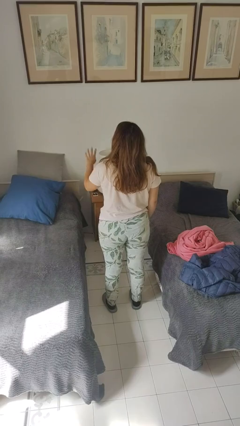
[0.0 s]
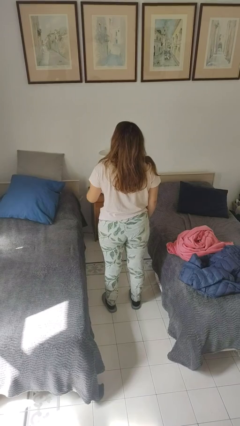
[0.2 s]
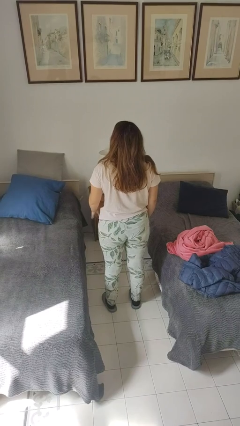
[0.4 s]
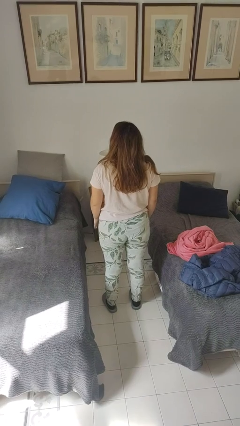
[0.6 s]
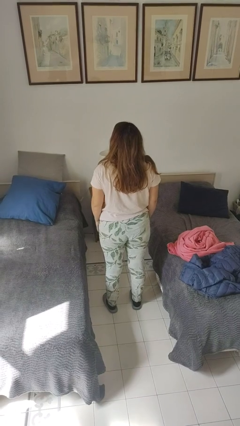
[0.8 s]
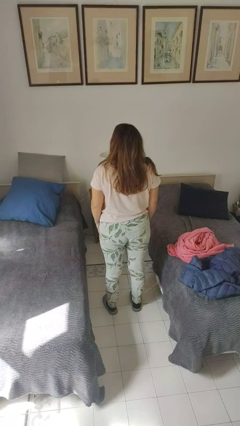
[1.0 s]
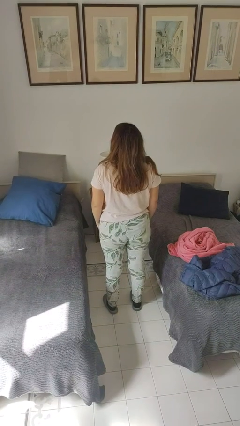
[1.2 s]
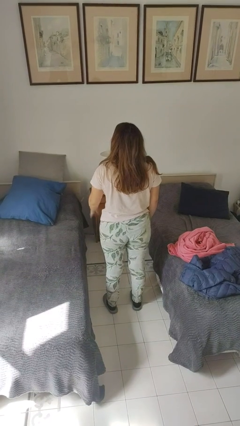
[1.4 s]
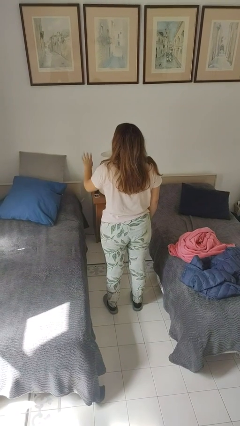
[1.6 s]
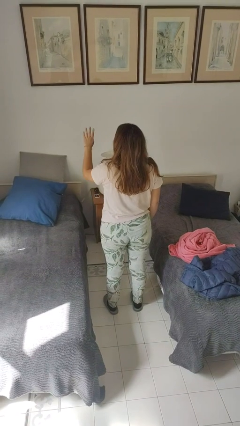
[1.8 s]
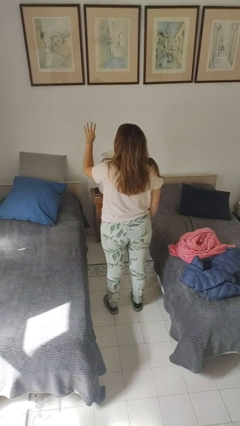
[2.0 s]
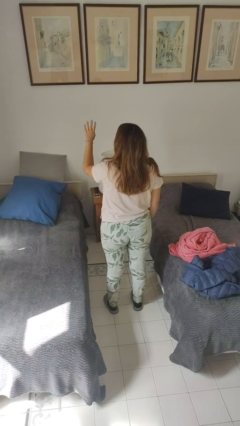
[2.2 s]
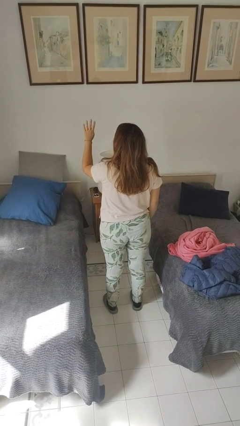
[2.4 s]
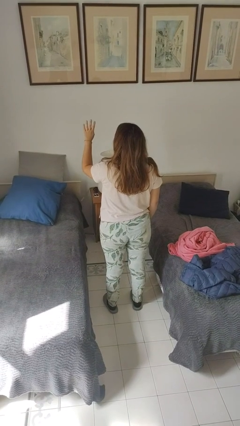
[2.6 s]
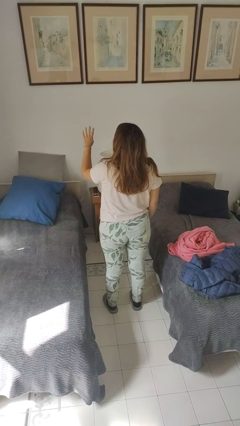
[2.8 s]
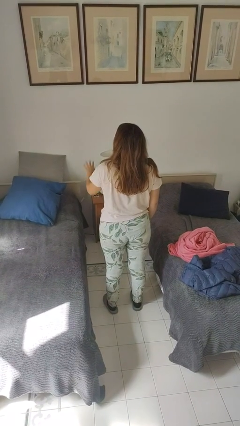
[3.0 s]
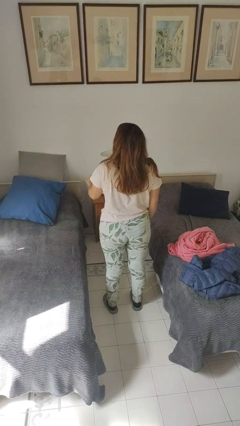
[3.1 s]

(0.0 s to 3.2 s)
person gestures number four

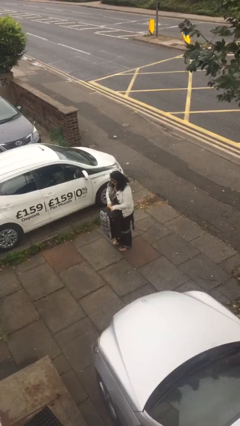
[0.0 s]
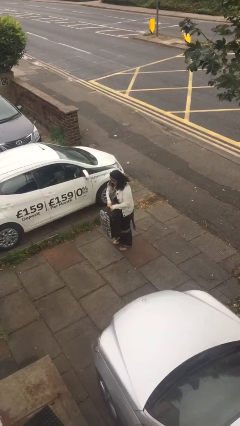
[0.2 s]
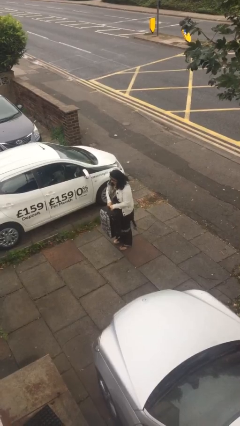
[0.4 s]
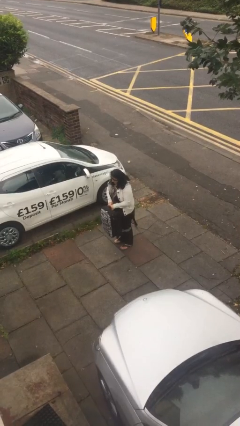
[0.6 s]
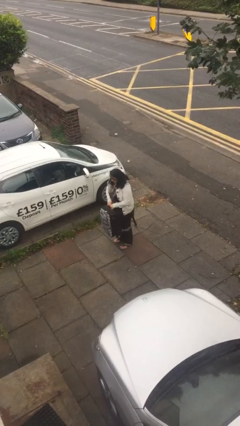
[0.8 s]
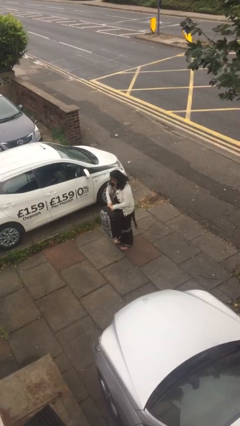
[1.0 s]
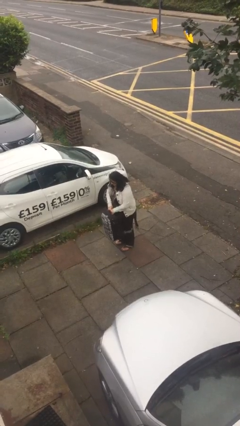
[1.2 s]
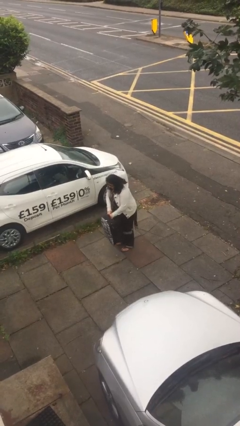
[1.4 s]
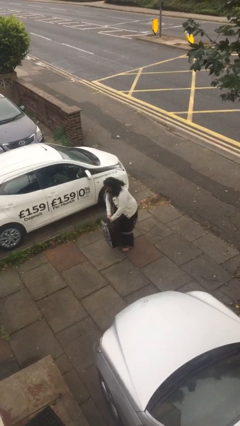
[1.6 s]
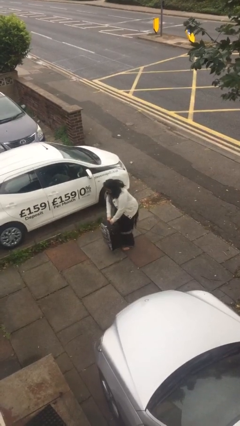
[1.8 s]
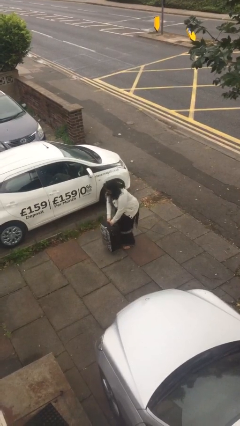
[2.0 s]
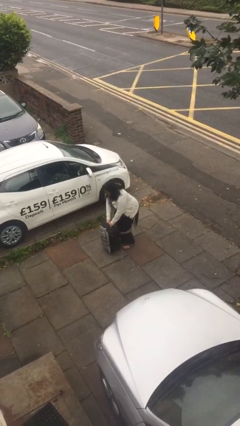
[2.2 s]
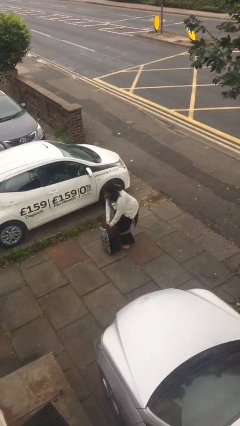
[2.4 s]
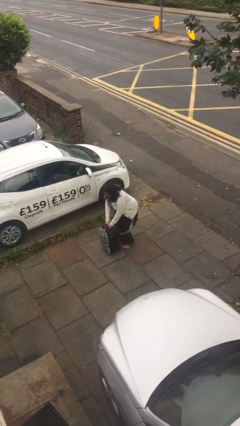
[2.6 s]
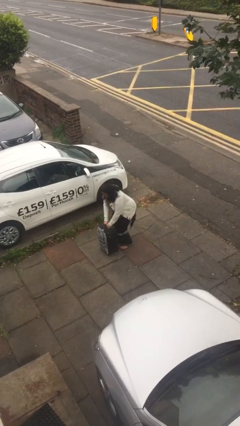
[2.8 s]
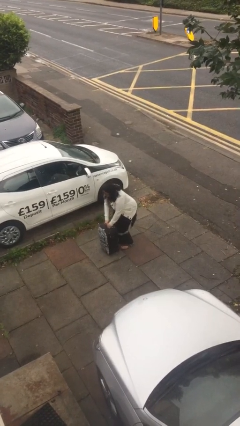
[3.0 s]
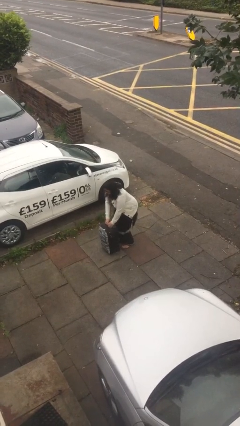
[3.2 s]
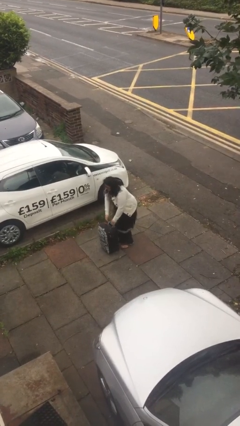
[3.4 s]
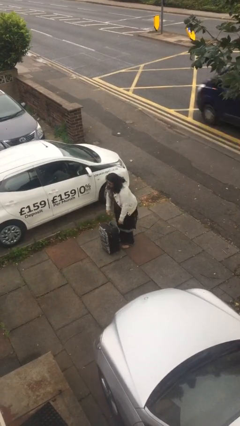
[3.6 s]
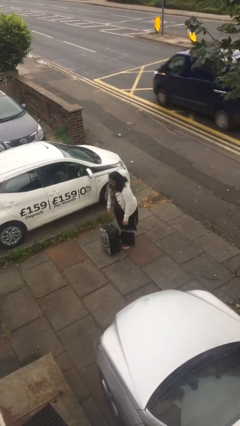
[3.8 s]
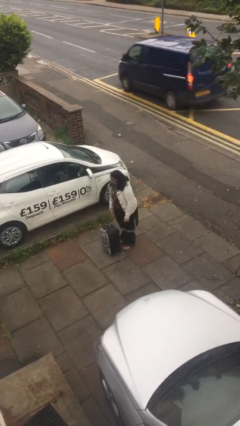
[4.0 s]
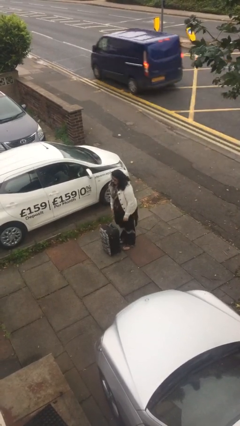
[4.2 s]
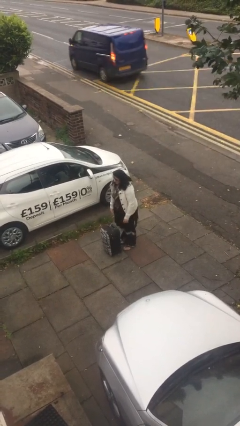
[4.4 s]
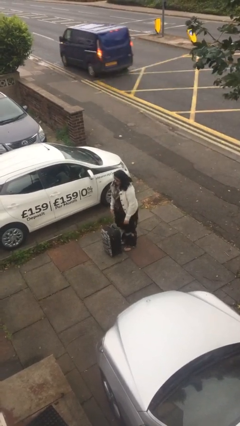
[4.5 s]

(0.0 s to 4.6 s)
person puts down object on floor

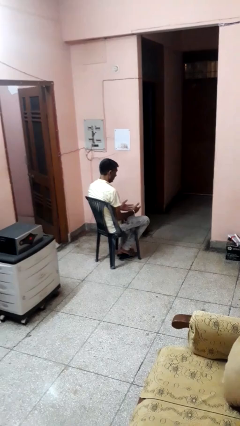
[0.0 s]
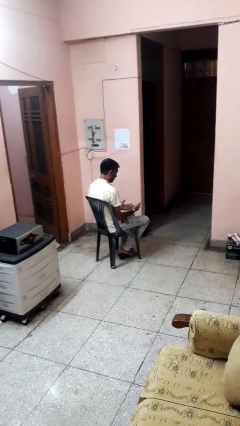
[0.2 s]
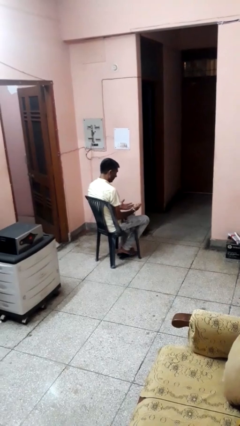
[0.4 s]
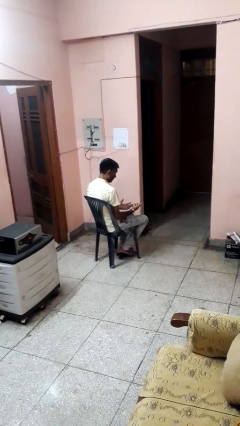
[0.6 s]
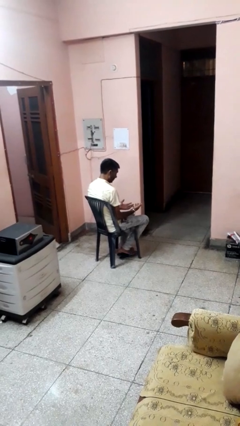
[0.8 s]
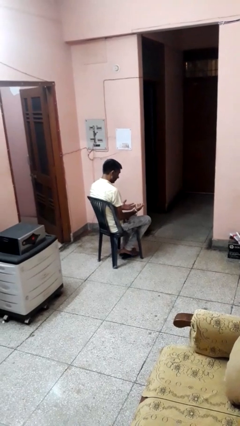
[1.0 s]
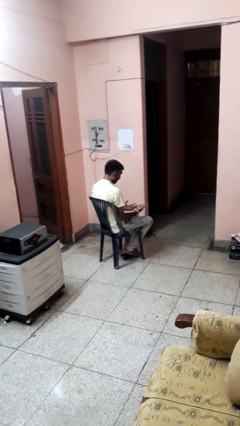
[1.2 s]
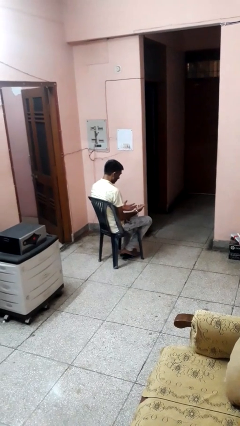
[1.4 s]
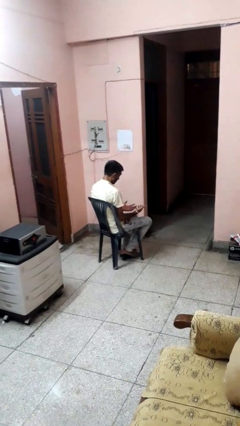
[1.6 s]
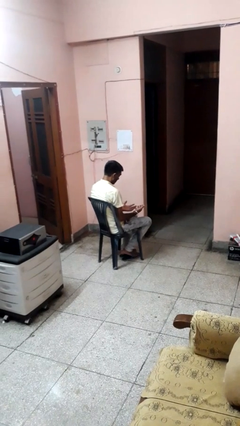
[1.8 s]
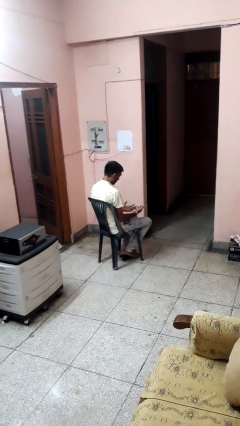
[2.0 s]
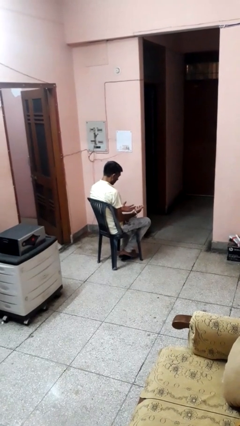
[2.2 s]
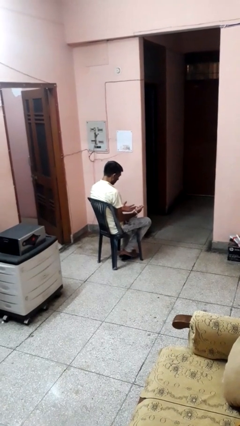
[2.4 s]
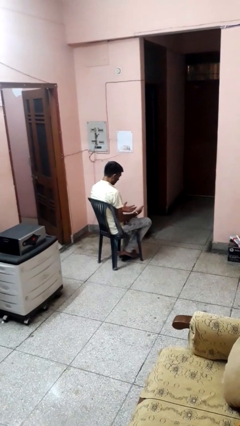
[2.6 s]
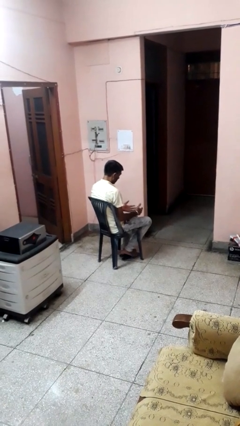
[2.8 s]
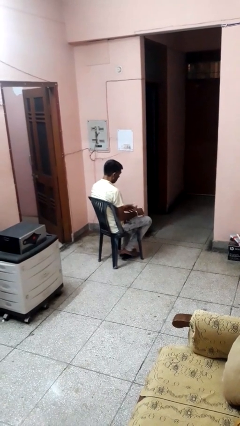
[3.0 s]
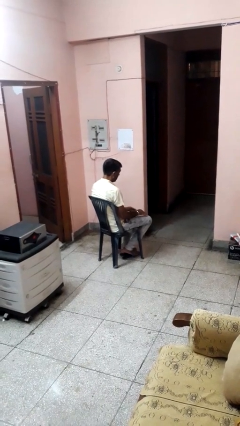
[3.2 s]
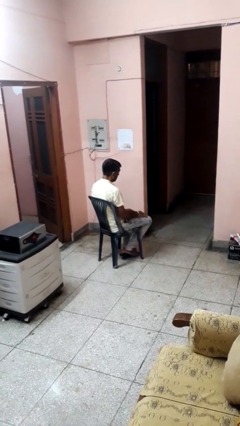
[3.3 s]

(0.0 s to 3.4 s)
person looks at hands in lap

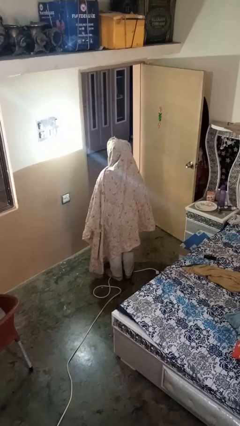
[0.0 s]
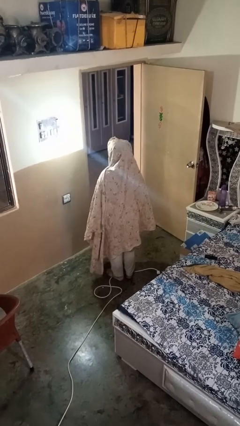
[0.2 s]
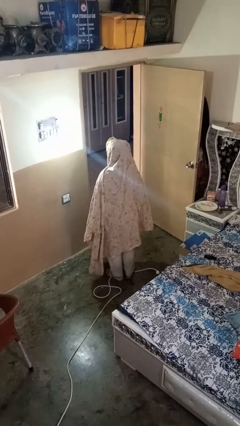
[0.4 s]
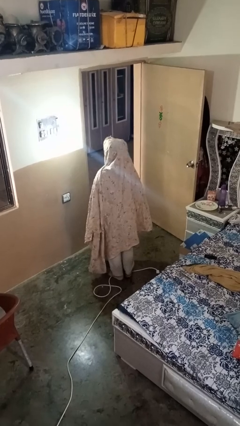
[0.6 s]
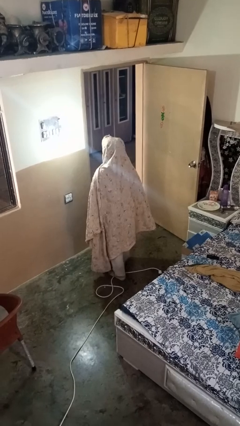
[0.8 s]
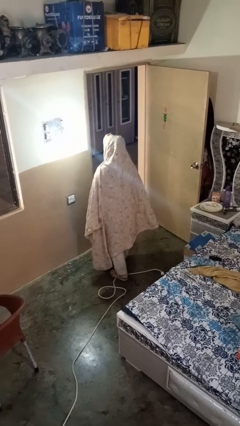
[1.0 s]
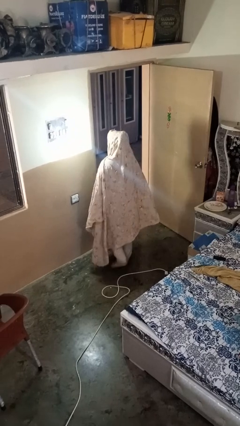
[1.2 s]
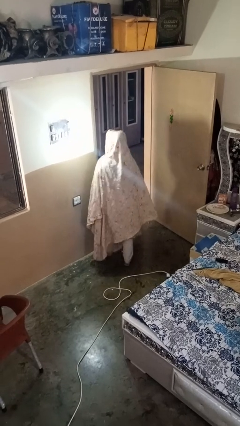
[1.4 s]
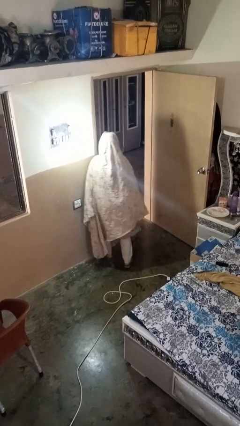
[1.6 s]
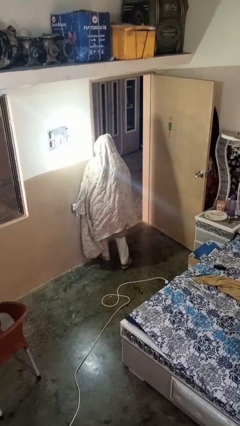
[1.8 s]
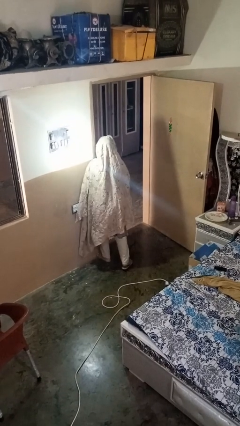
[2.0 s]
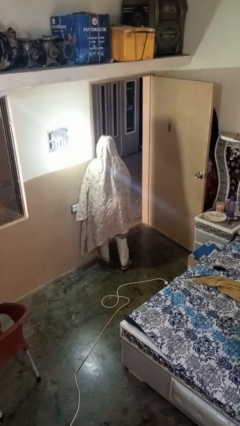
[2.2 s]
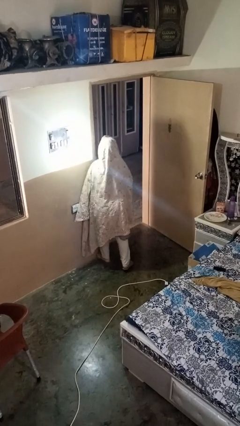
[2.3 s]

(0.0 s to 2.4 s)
person bumps into wall

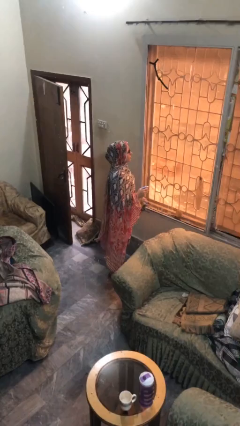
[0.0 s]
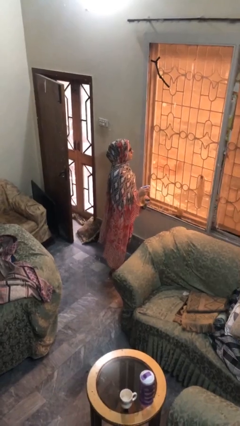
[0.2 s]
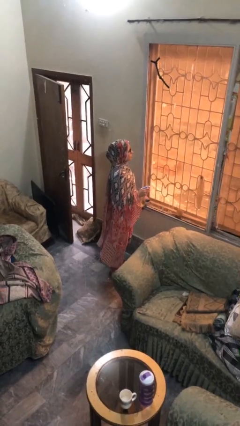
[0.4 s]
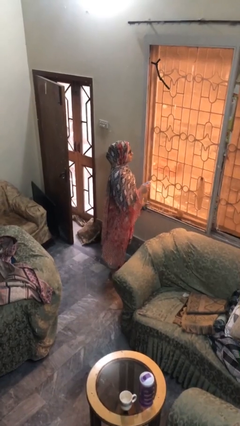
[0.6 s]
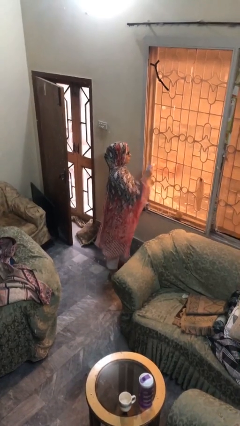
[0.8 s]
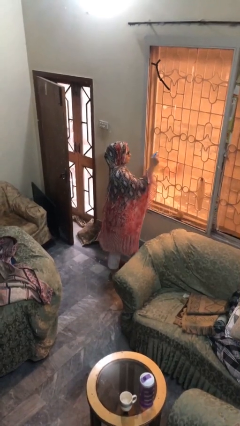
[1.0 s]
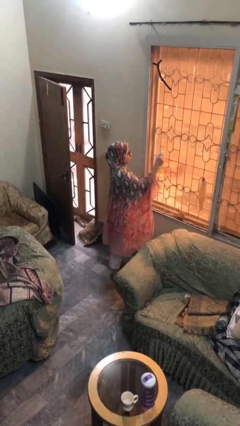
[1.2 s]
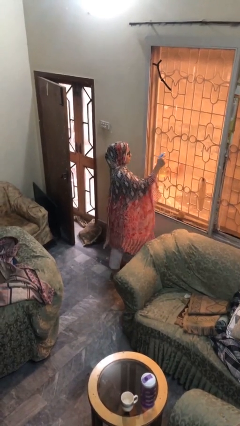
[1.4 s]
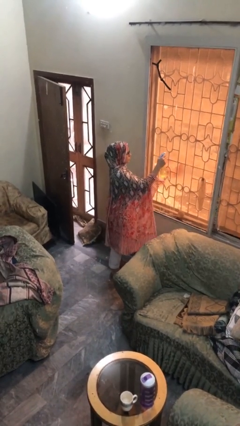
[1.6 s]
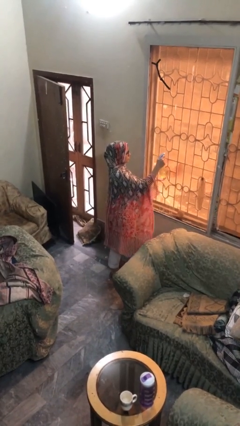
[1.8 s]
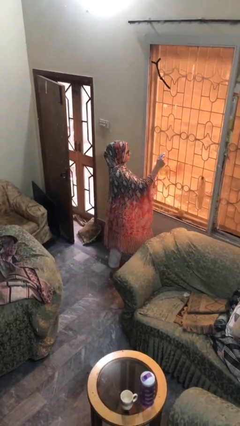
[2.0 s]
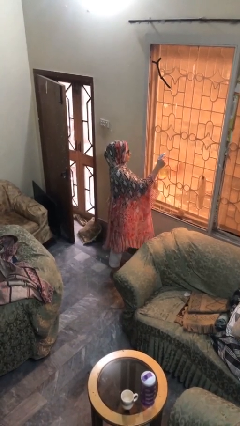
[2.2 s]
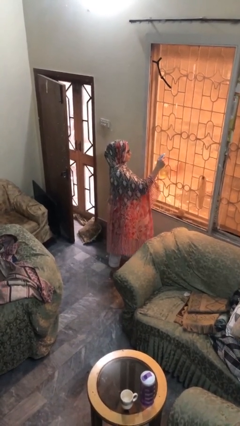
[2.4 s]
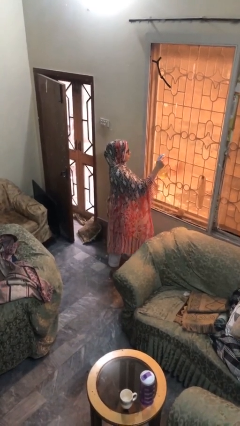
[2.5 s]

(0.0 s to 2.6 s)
person sprays from bottle

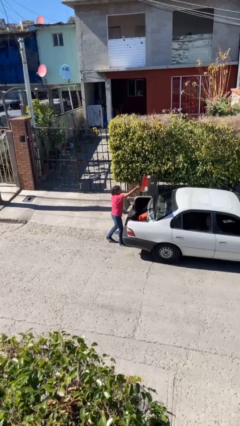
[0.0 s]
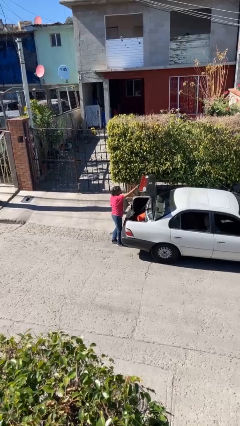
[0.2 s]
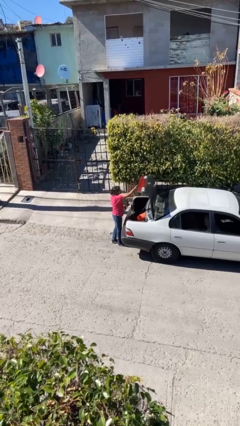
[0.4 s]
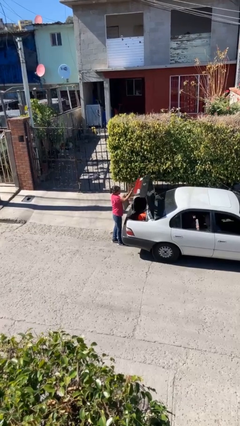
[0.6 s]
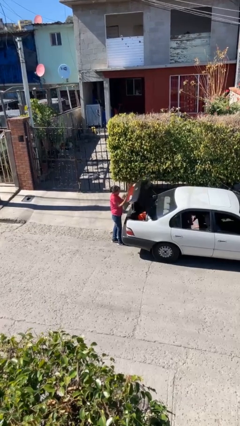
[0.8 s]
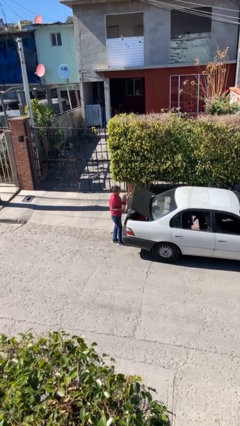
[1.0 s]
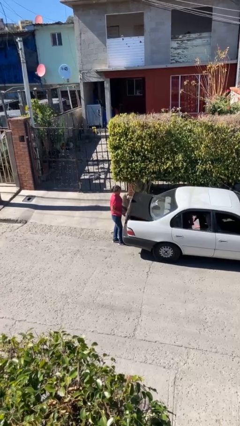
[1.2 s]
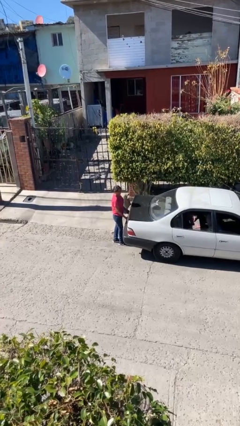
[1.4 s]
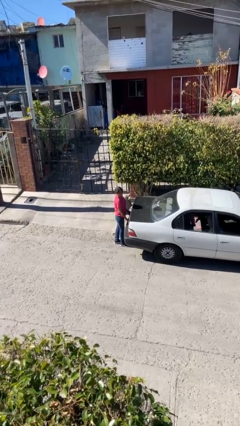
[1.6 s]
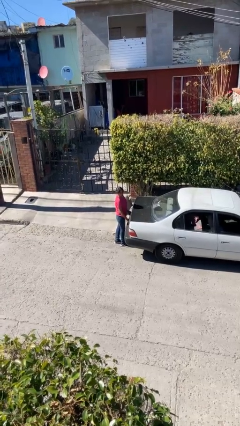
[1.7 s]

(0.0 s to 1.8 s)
person closes car trunk
